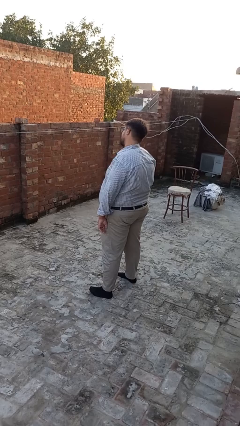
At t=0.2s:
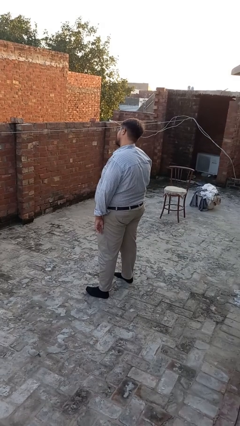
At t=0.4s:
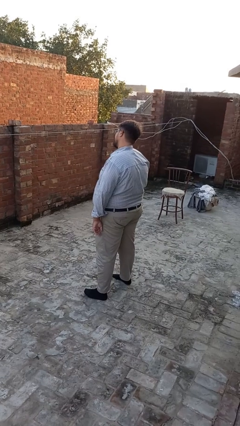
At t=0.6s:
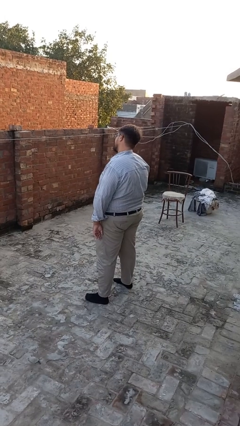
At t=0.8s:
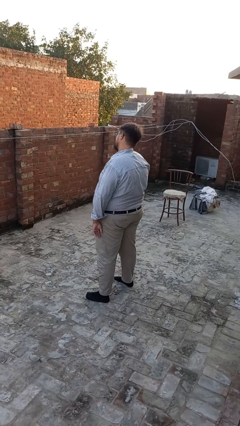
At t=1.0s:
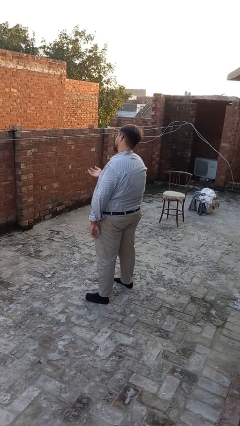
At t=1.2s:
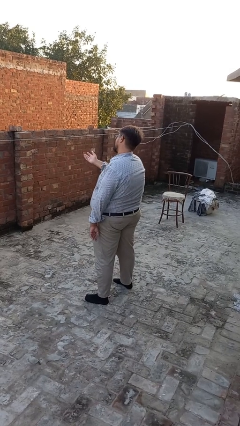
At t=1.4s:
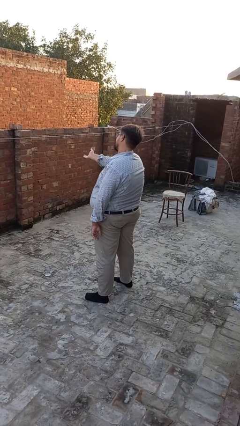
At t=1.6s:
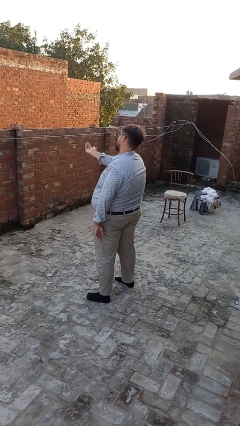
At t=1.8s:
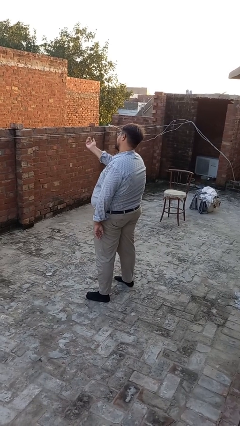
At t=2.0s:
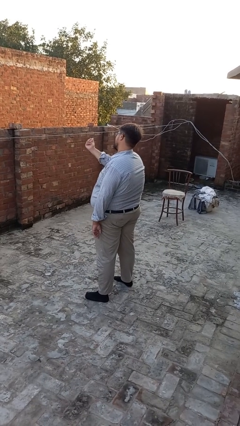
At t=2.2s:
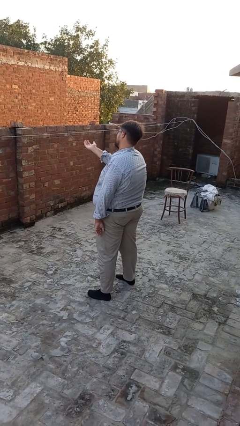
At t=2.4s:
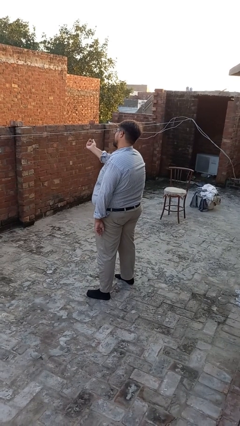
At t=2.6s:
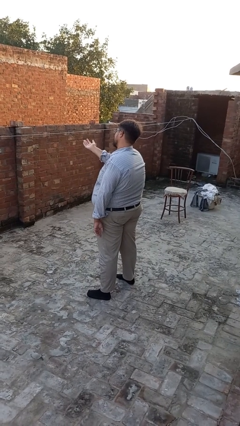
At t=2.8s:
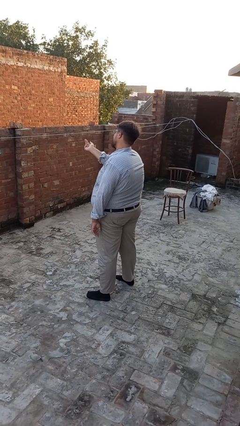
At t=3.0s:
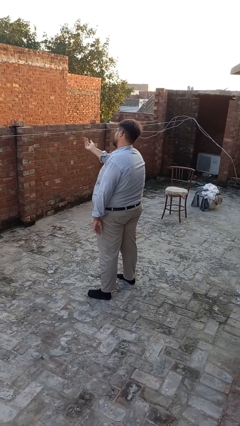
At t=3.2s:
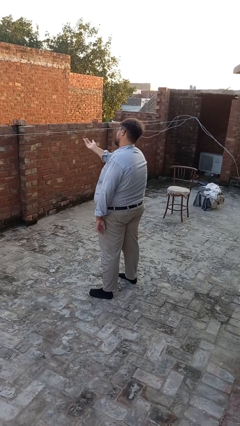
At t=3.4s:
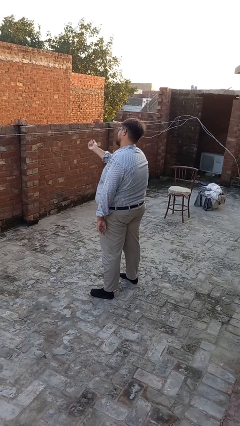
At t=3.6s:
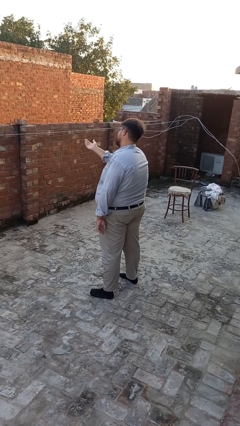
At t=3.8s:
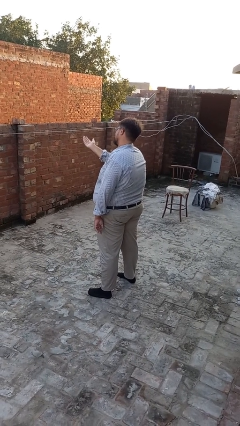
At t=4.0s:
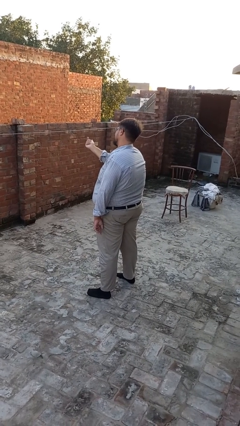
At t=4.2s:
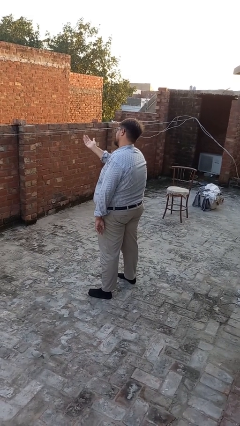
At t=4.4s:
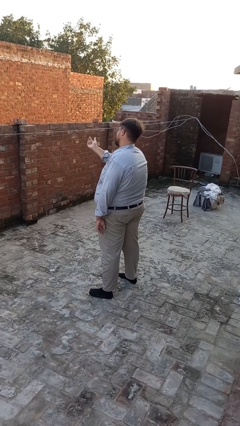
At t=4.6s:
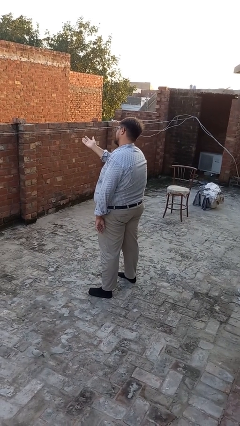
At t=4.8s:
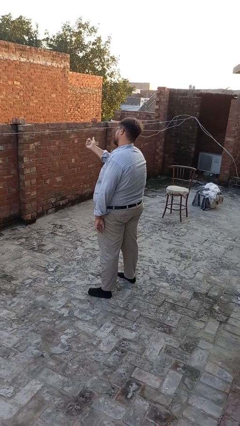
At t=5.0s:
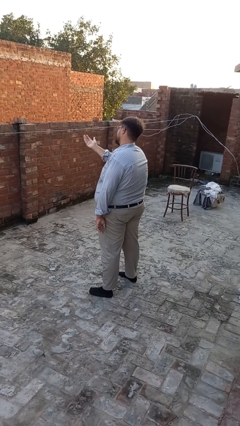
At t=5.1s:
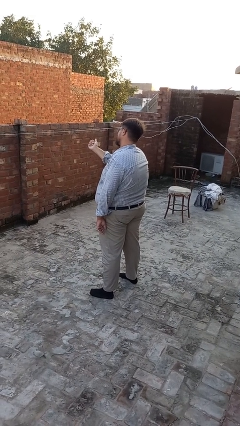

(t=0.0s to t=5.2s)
person gestures come here

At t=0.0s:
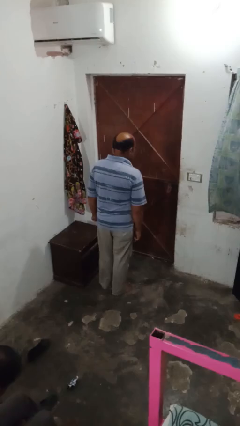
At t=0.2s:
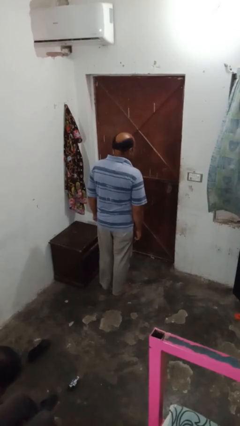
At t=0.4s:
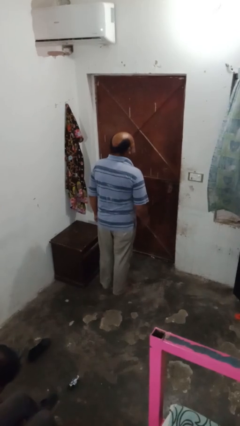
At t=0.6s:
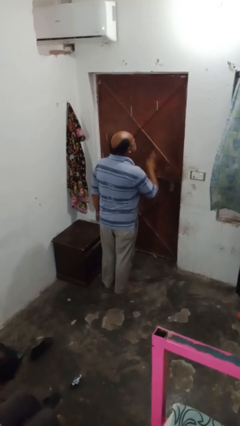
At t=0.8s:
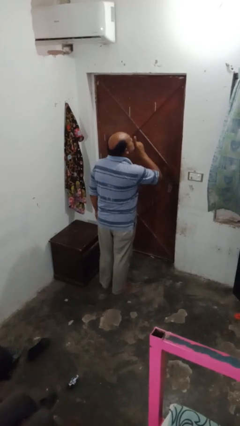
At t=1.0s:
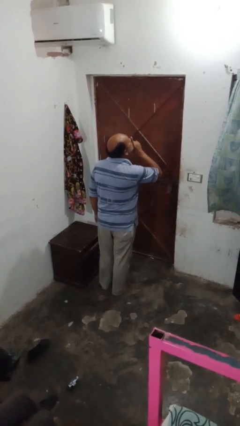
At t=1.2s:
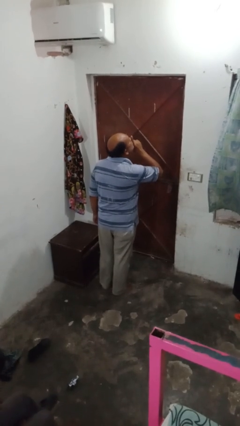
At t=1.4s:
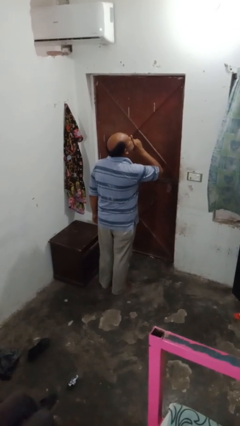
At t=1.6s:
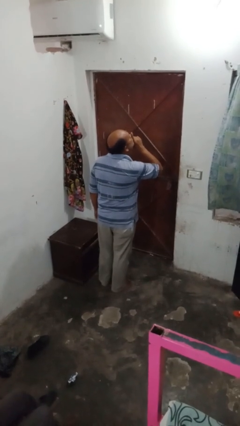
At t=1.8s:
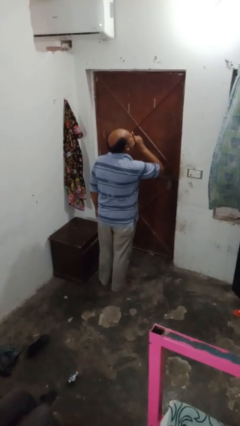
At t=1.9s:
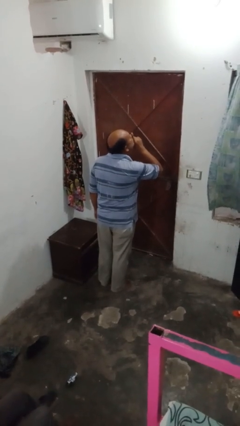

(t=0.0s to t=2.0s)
person gestures be quiet

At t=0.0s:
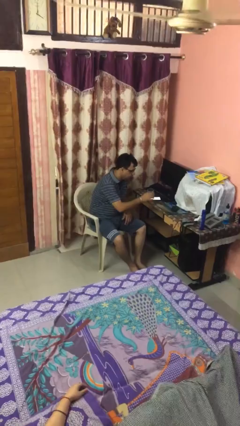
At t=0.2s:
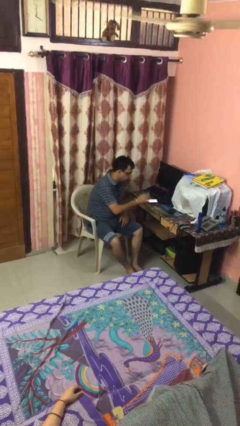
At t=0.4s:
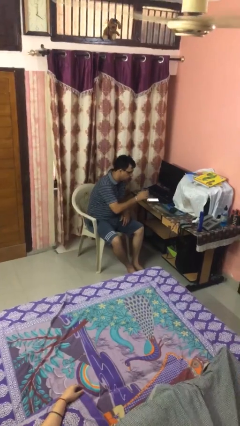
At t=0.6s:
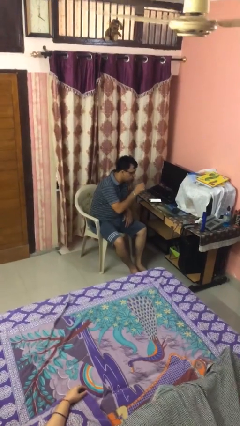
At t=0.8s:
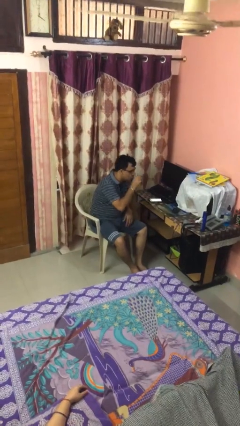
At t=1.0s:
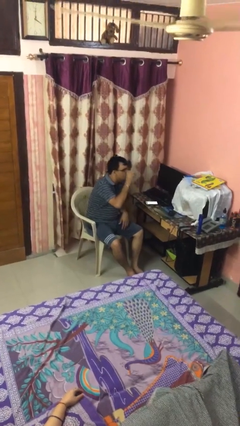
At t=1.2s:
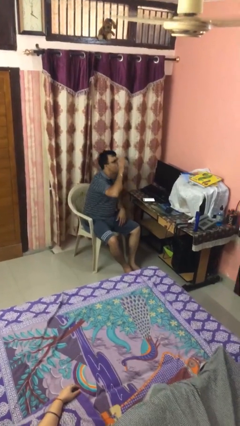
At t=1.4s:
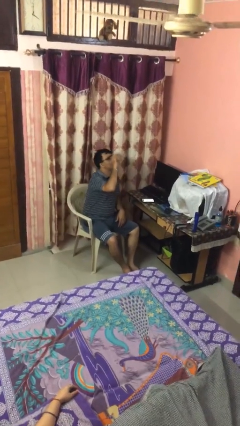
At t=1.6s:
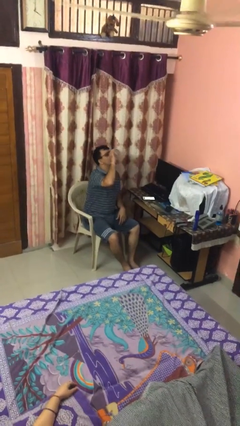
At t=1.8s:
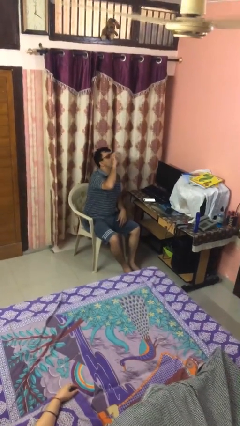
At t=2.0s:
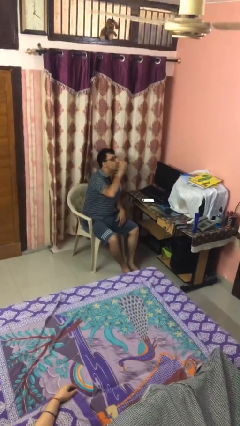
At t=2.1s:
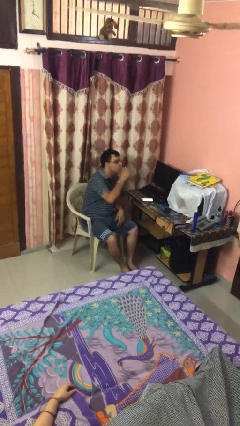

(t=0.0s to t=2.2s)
person drinks from shotglass

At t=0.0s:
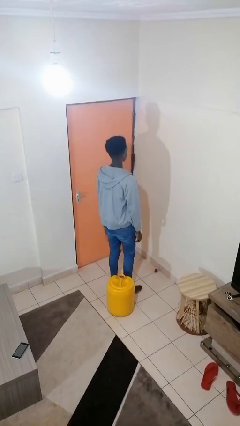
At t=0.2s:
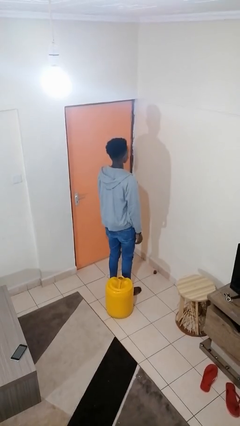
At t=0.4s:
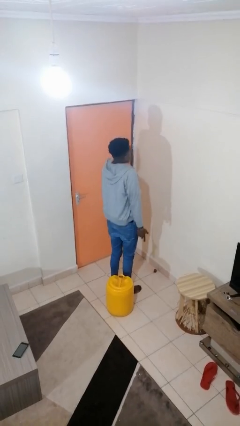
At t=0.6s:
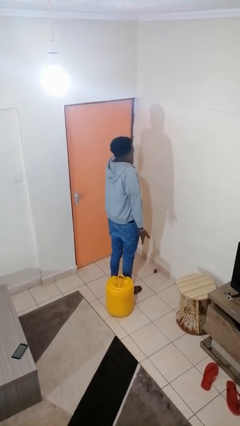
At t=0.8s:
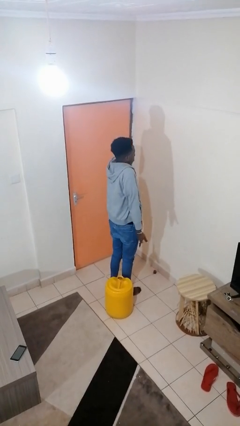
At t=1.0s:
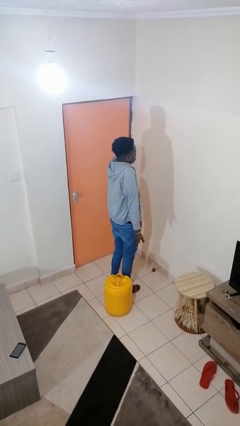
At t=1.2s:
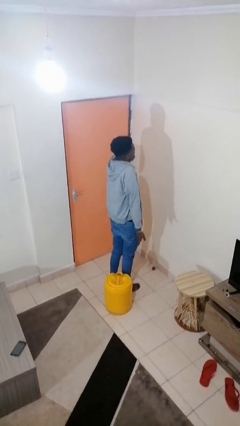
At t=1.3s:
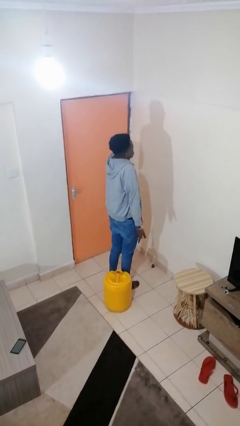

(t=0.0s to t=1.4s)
person shrugs

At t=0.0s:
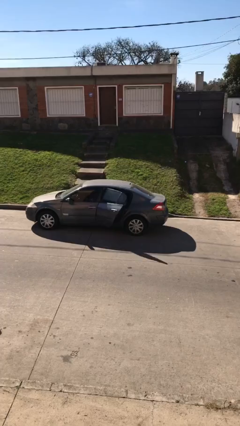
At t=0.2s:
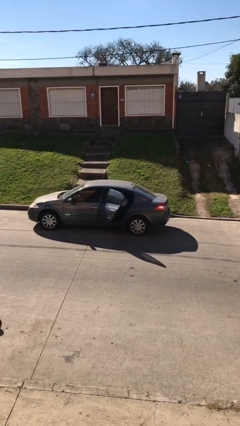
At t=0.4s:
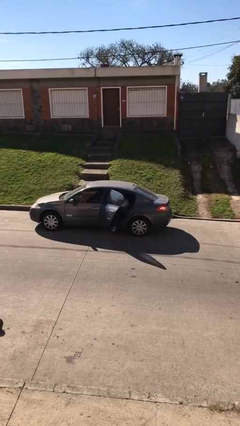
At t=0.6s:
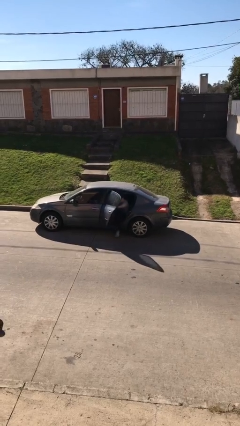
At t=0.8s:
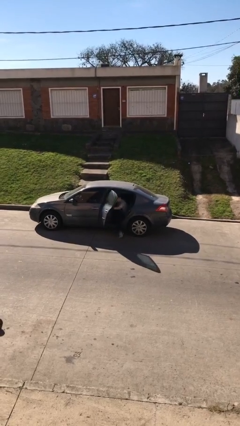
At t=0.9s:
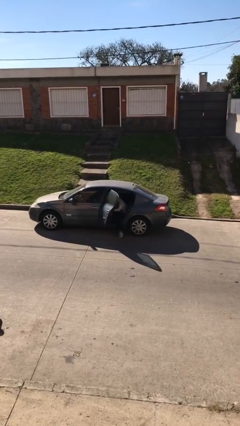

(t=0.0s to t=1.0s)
person opens car door

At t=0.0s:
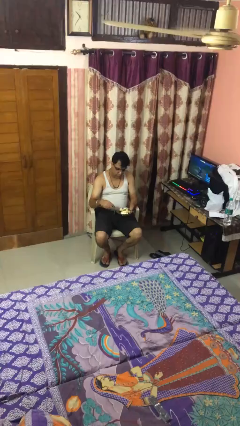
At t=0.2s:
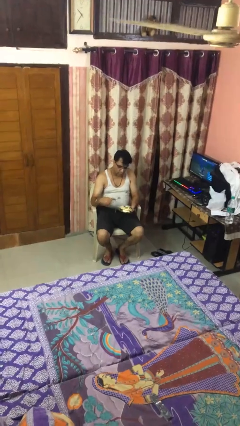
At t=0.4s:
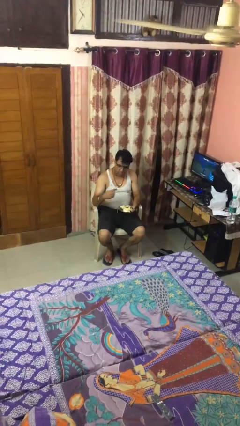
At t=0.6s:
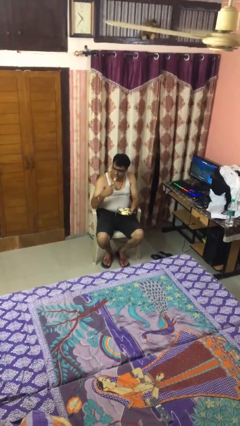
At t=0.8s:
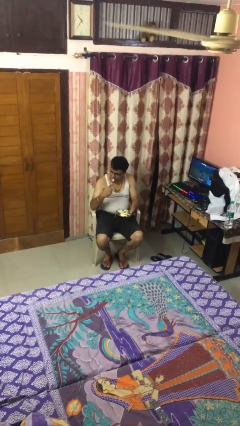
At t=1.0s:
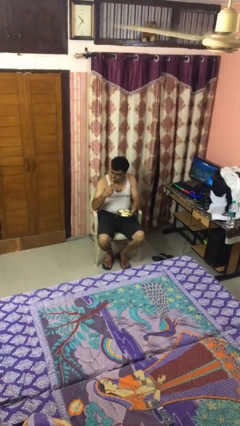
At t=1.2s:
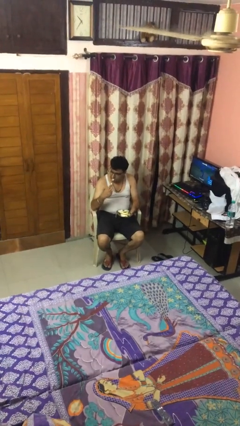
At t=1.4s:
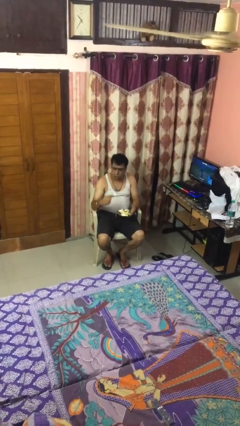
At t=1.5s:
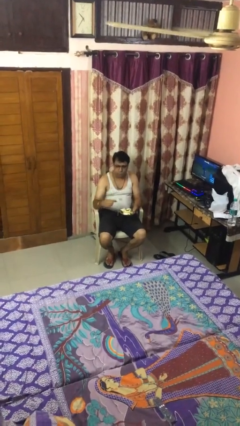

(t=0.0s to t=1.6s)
person eats with utensil

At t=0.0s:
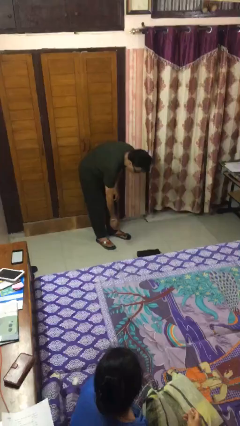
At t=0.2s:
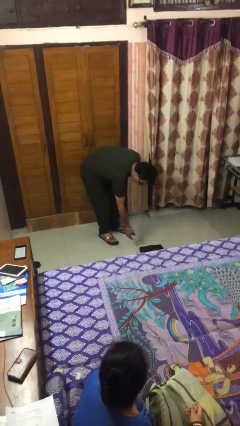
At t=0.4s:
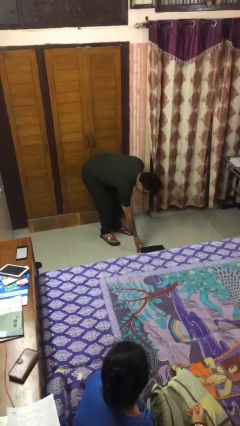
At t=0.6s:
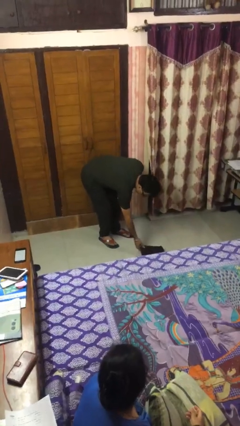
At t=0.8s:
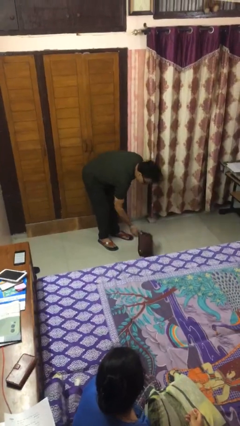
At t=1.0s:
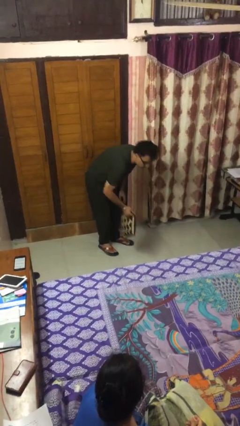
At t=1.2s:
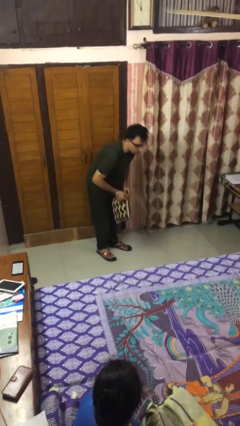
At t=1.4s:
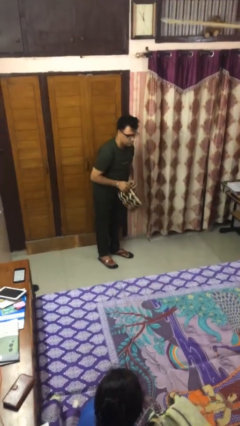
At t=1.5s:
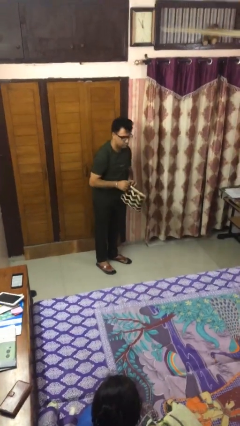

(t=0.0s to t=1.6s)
person picks up object from floor

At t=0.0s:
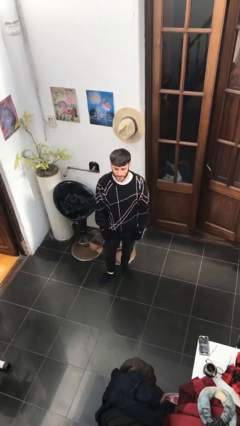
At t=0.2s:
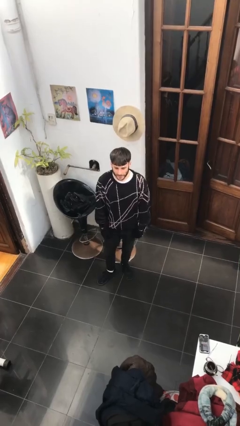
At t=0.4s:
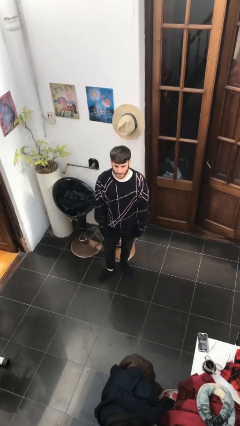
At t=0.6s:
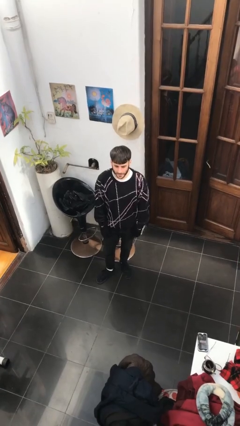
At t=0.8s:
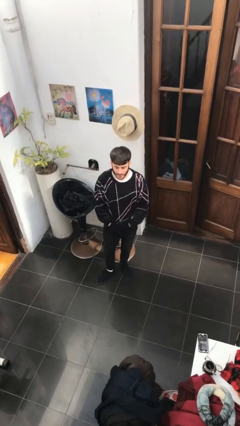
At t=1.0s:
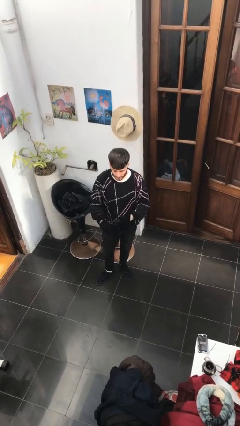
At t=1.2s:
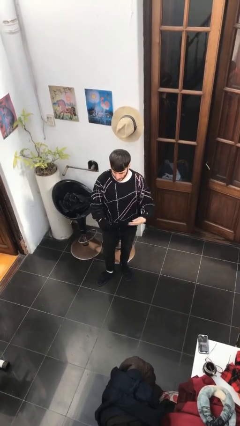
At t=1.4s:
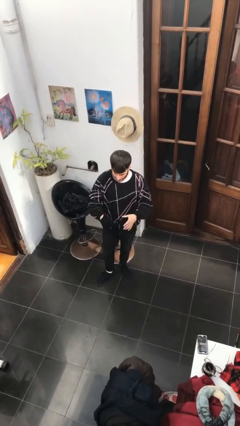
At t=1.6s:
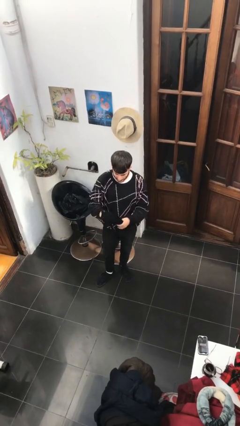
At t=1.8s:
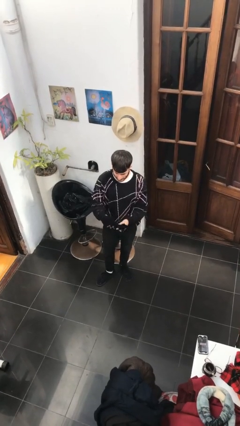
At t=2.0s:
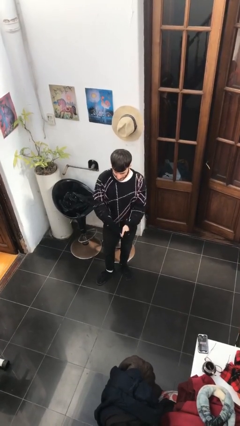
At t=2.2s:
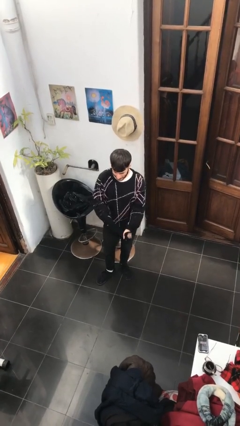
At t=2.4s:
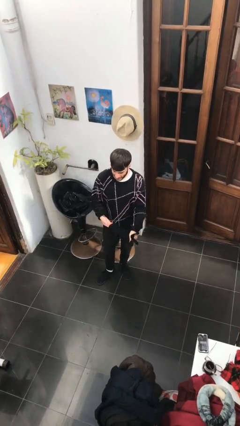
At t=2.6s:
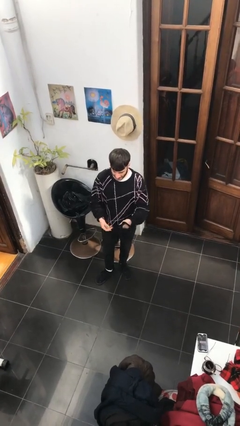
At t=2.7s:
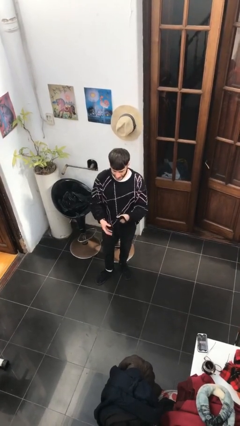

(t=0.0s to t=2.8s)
person takes off gloves
